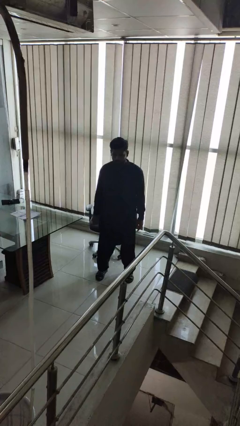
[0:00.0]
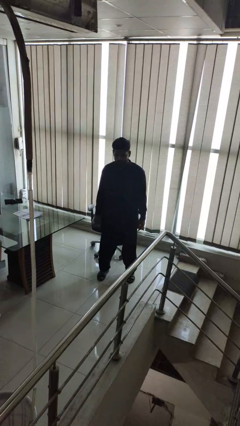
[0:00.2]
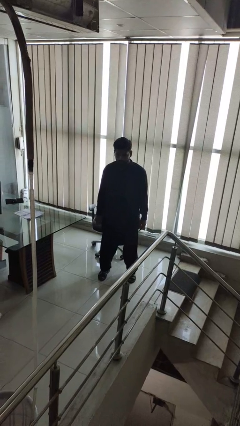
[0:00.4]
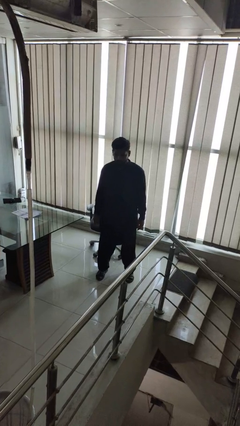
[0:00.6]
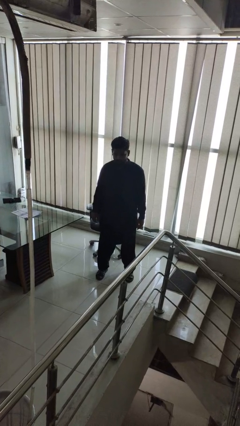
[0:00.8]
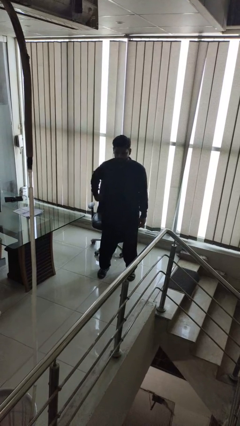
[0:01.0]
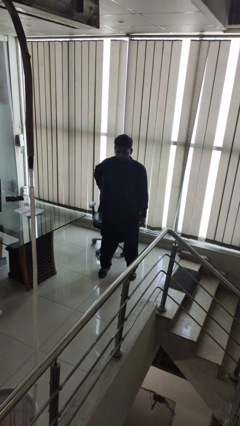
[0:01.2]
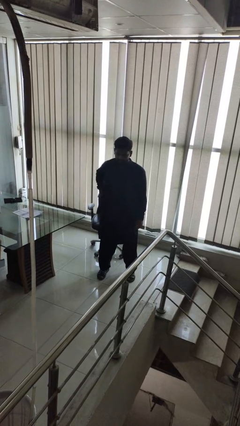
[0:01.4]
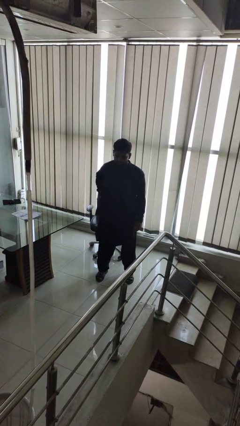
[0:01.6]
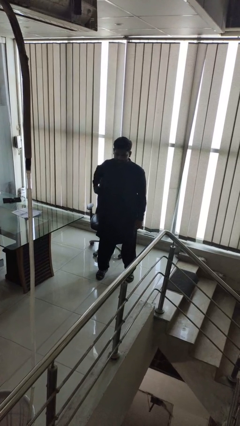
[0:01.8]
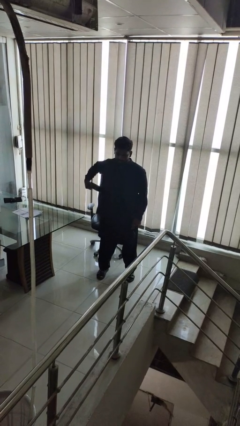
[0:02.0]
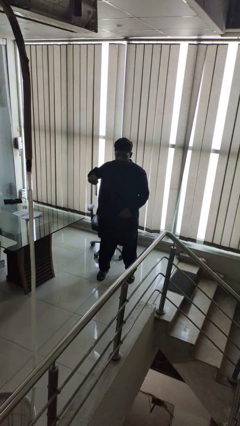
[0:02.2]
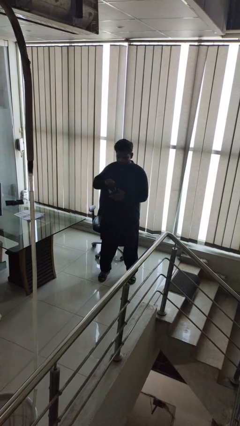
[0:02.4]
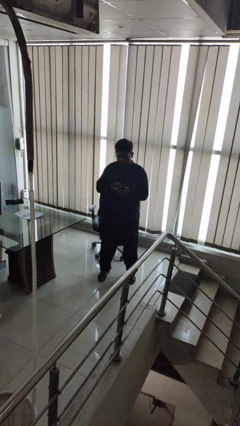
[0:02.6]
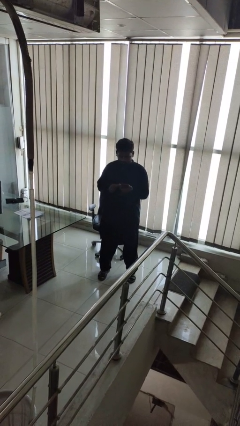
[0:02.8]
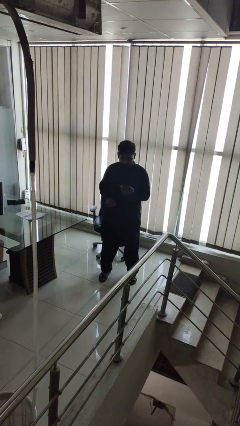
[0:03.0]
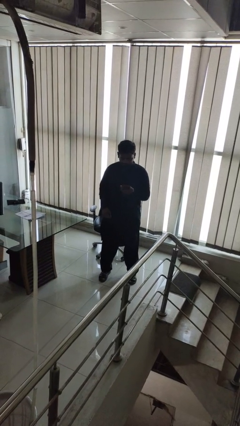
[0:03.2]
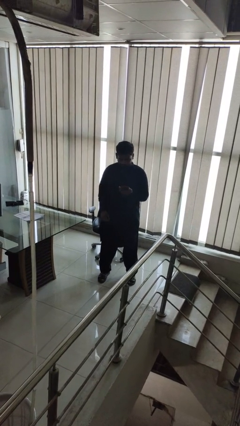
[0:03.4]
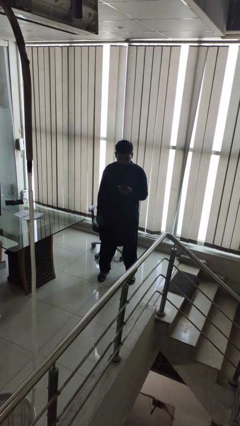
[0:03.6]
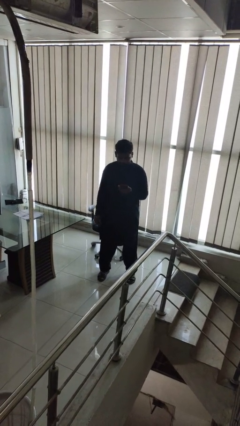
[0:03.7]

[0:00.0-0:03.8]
person takes phone from pocket

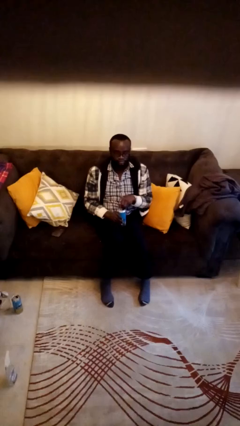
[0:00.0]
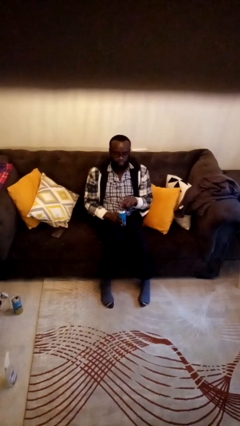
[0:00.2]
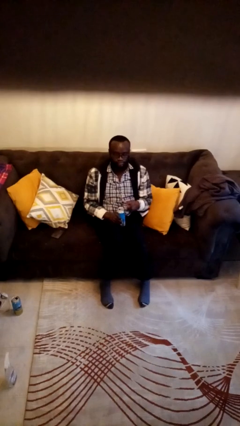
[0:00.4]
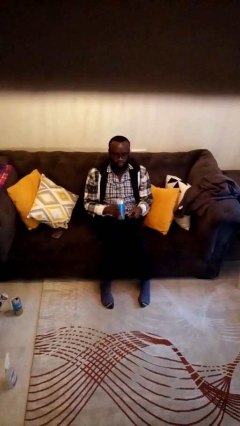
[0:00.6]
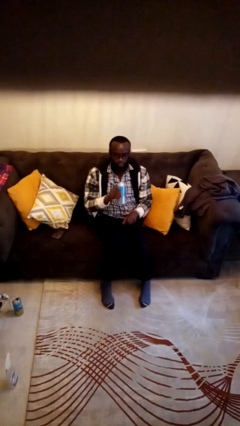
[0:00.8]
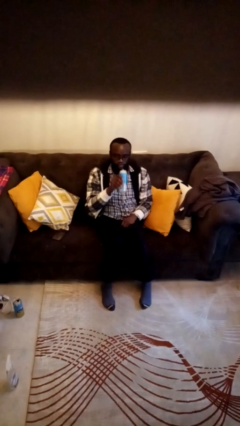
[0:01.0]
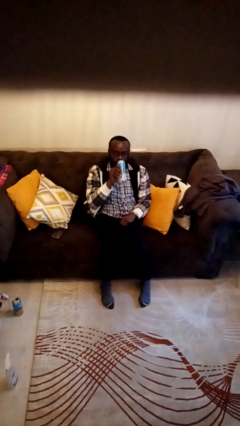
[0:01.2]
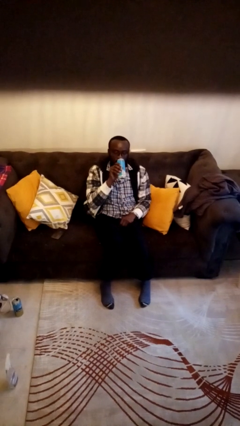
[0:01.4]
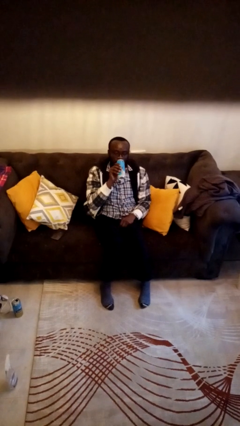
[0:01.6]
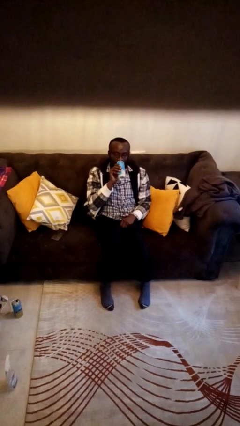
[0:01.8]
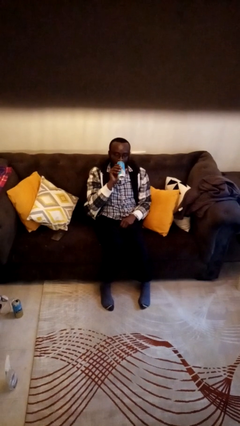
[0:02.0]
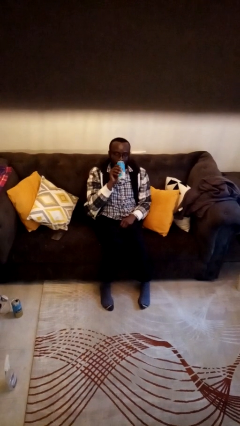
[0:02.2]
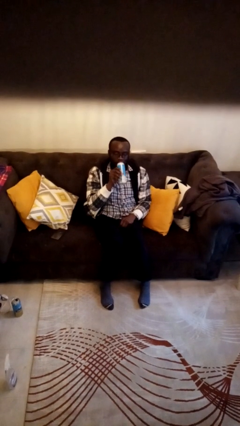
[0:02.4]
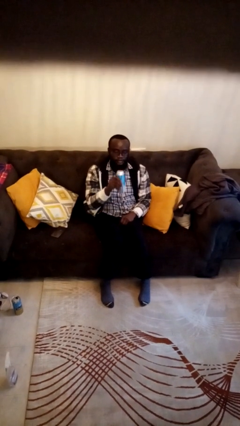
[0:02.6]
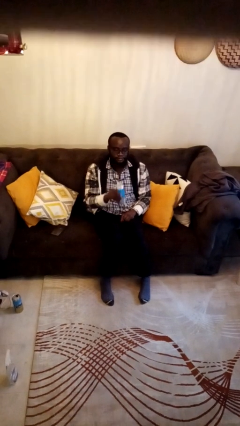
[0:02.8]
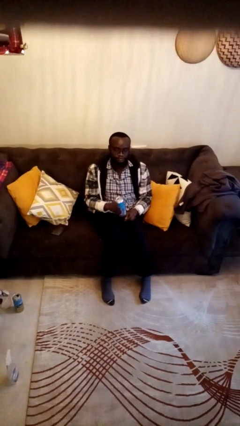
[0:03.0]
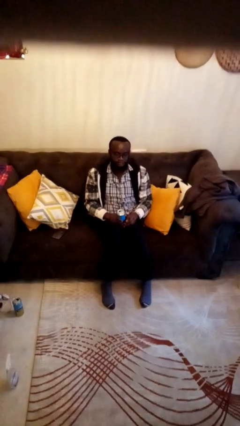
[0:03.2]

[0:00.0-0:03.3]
person drinks from beverage can

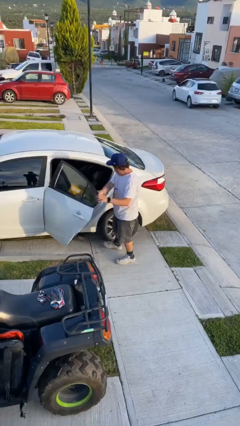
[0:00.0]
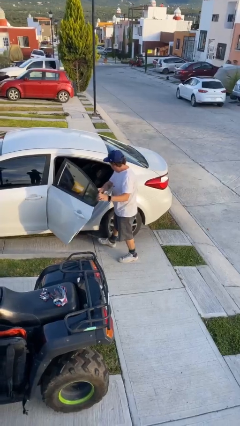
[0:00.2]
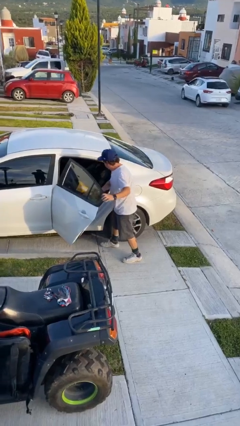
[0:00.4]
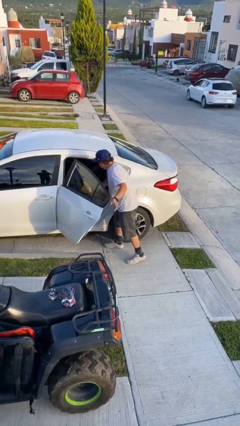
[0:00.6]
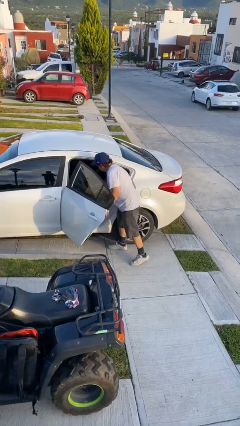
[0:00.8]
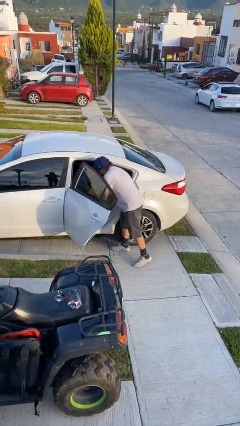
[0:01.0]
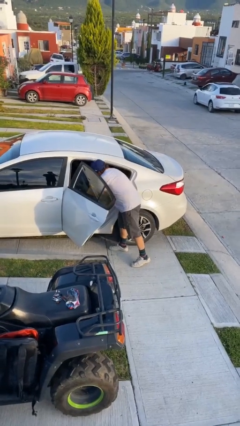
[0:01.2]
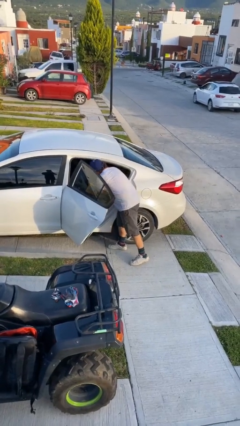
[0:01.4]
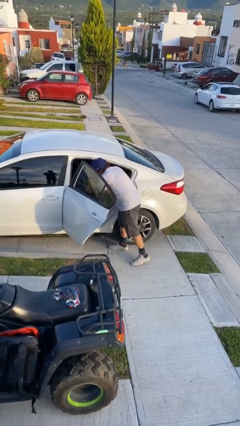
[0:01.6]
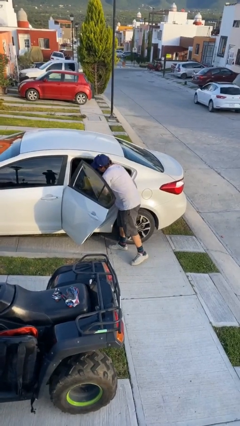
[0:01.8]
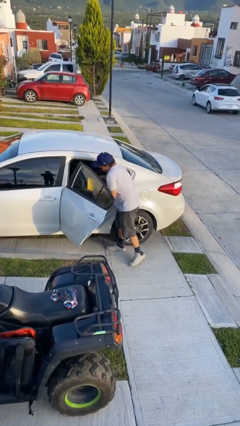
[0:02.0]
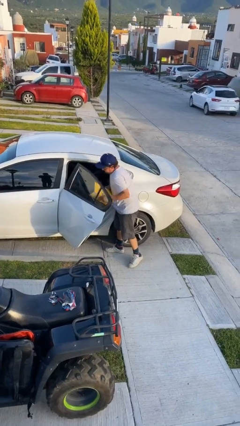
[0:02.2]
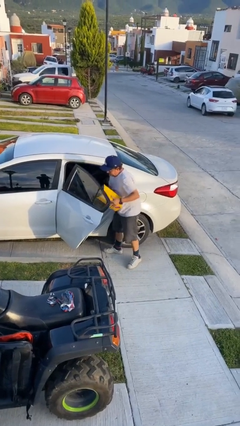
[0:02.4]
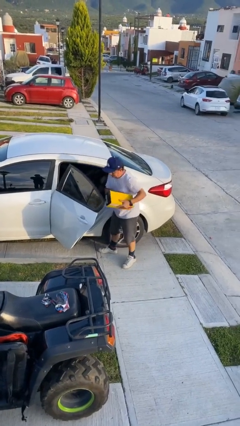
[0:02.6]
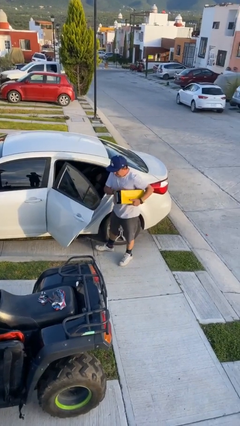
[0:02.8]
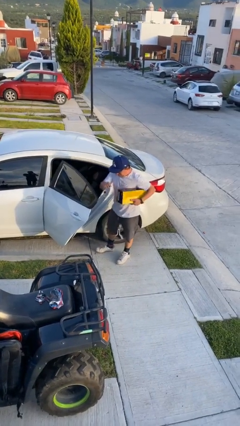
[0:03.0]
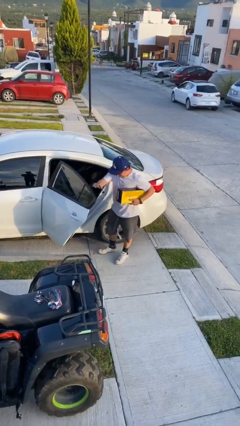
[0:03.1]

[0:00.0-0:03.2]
person unloads car

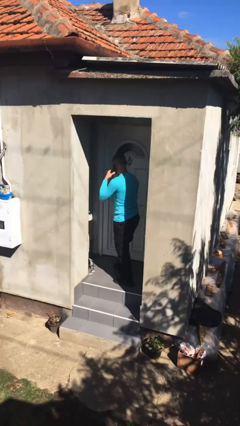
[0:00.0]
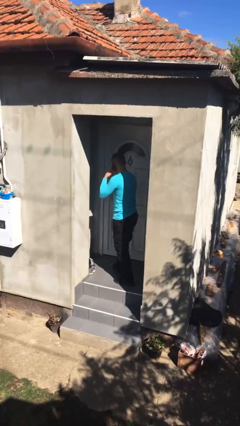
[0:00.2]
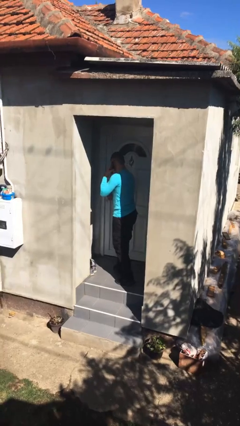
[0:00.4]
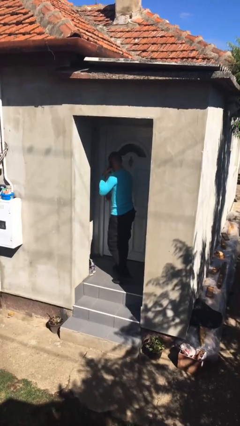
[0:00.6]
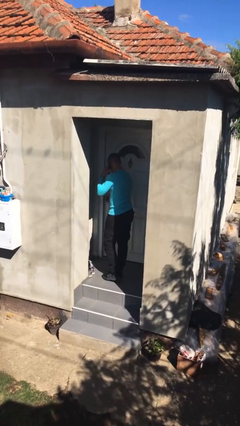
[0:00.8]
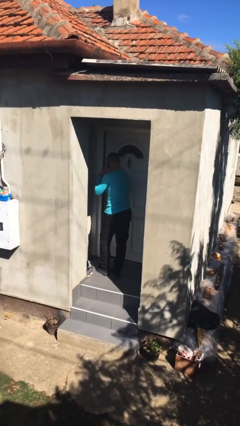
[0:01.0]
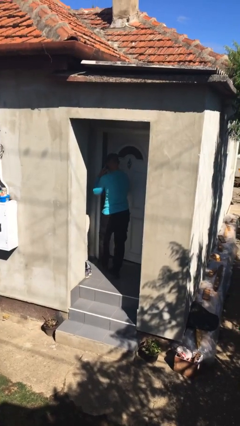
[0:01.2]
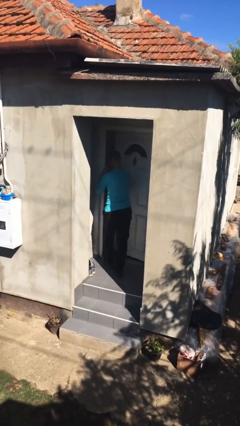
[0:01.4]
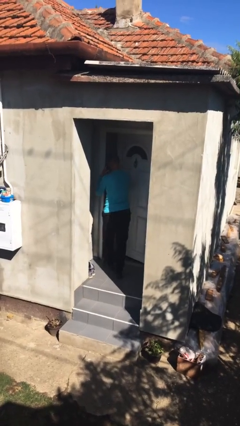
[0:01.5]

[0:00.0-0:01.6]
person opens facility door

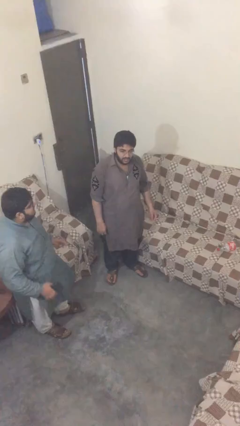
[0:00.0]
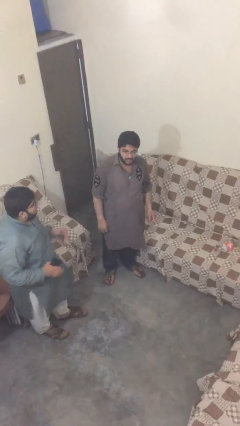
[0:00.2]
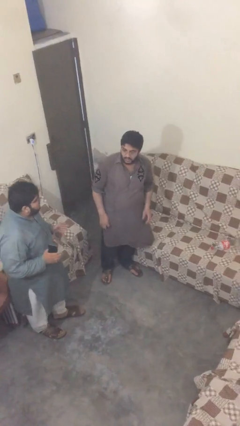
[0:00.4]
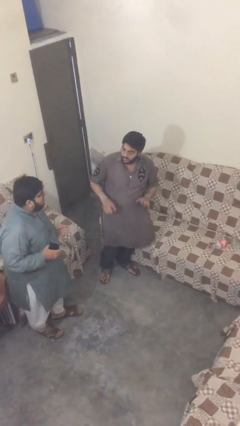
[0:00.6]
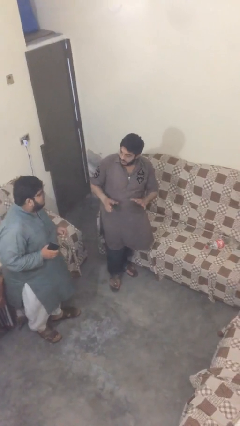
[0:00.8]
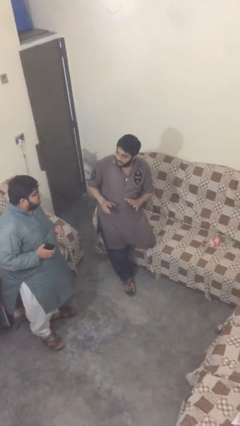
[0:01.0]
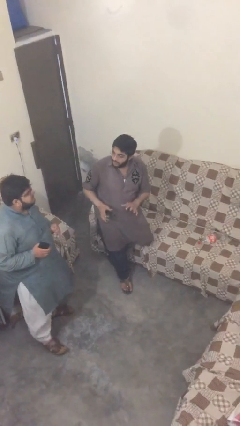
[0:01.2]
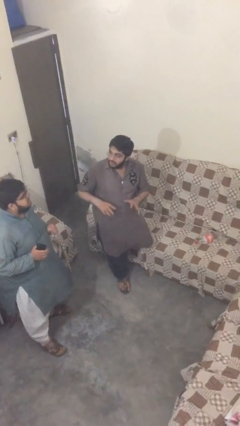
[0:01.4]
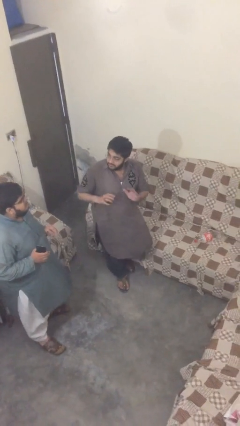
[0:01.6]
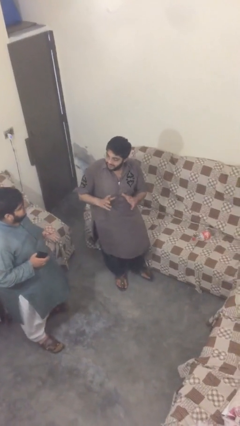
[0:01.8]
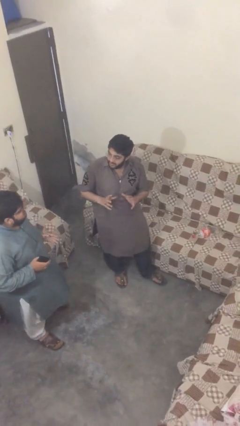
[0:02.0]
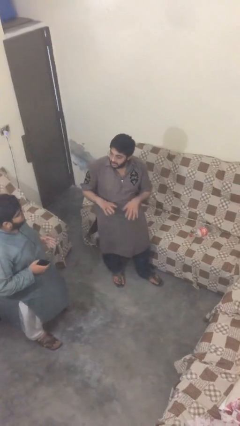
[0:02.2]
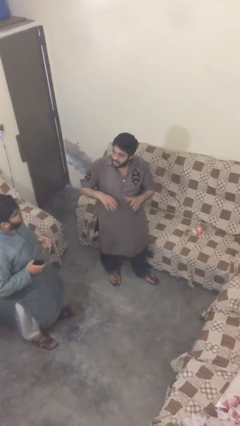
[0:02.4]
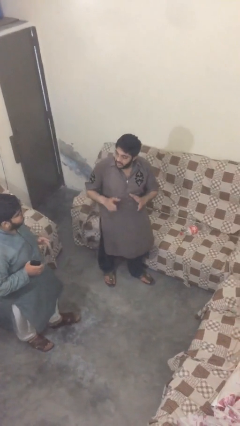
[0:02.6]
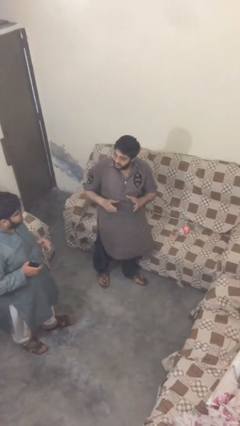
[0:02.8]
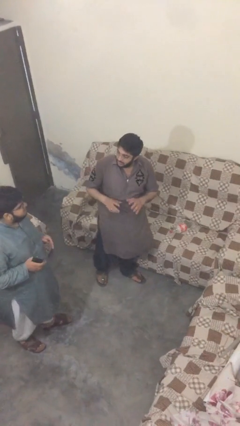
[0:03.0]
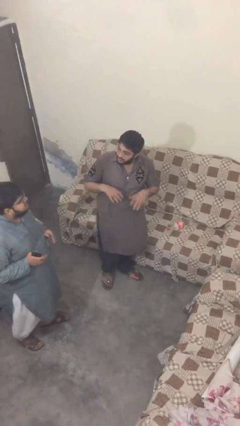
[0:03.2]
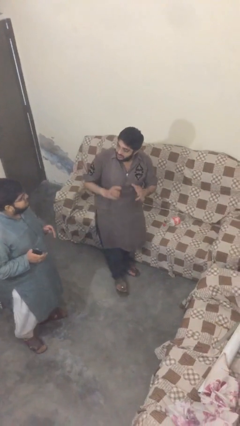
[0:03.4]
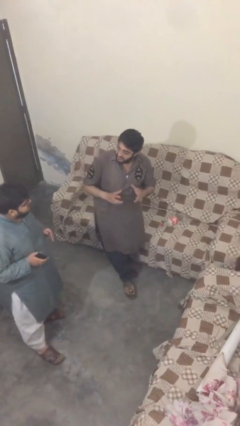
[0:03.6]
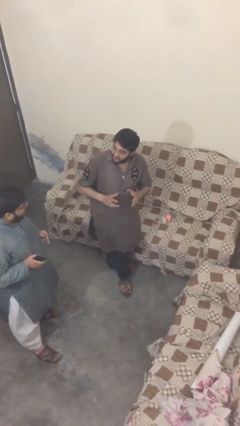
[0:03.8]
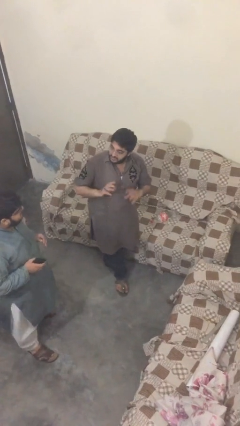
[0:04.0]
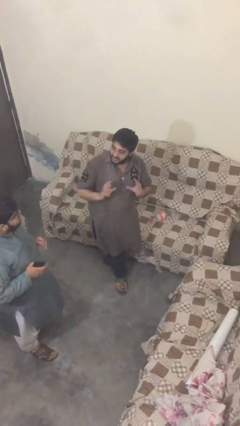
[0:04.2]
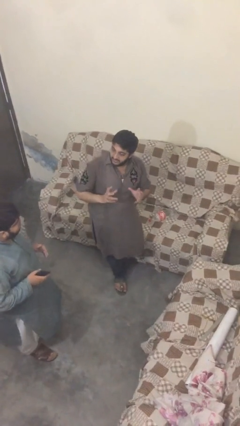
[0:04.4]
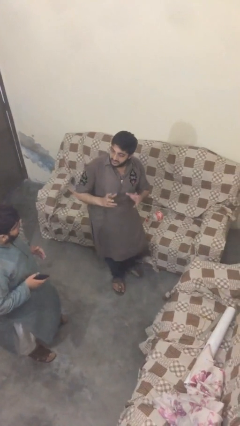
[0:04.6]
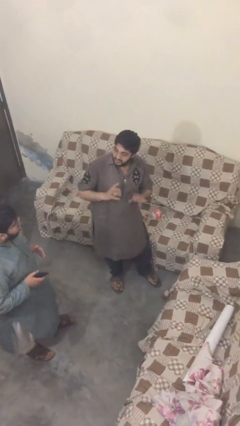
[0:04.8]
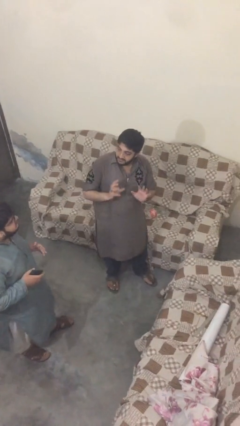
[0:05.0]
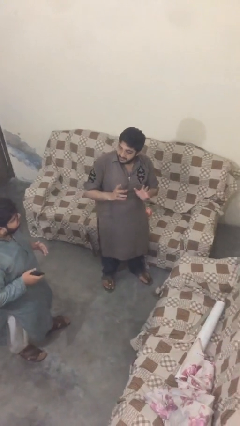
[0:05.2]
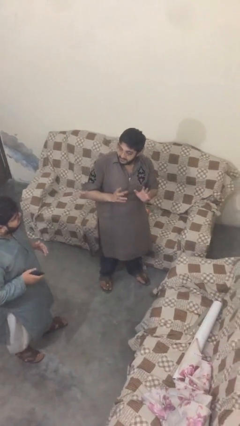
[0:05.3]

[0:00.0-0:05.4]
person talks to person

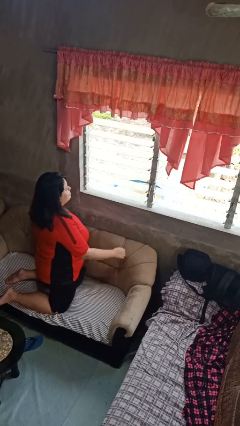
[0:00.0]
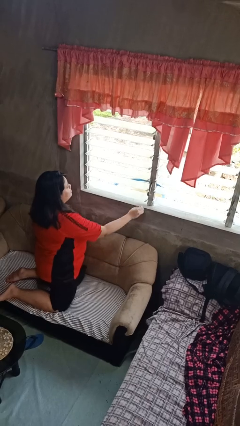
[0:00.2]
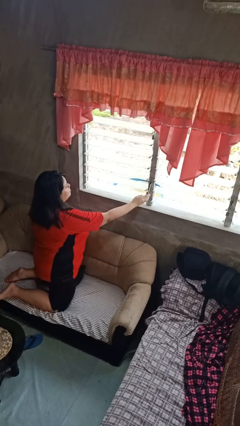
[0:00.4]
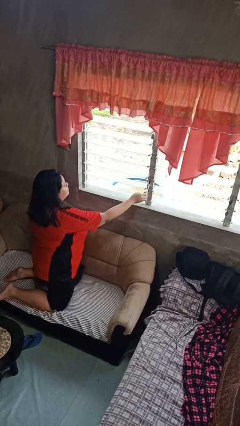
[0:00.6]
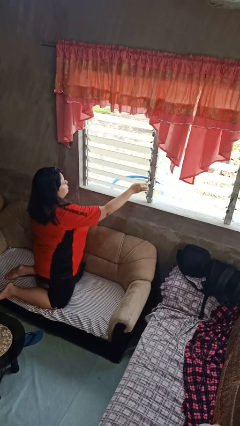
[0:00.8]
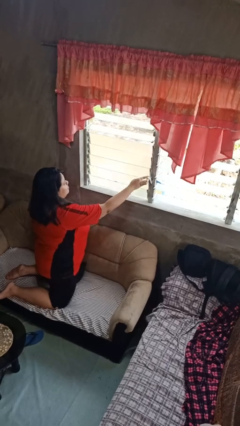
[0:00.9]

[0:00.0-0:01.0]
person closes home window
